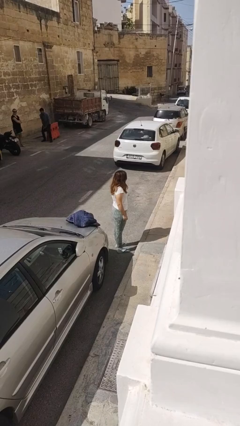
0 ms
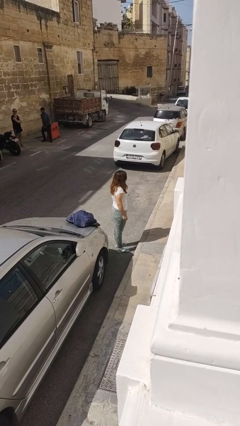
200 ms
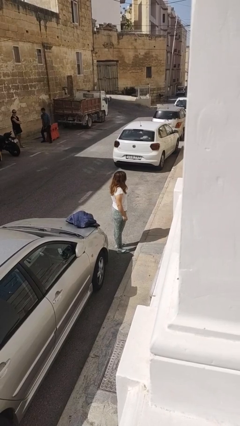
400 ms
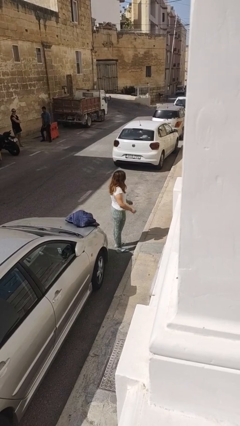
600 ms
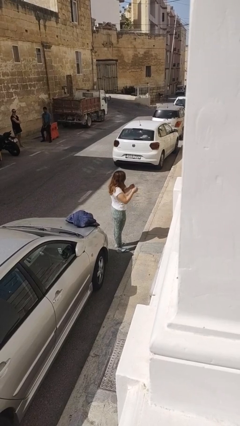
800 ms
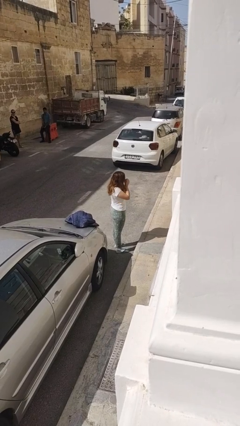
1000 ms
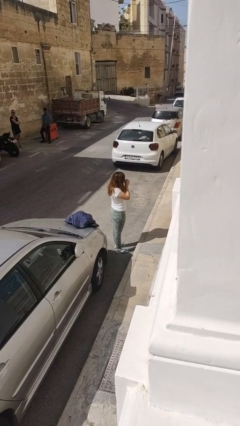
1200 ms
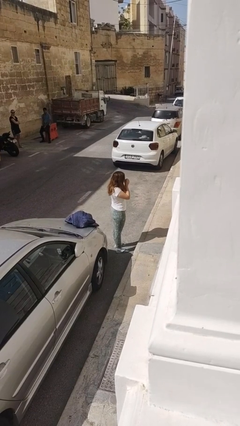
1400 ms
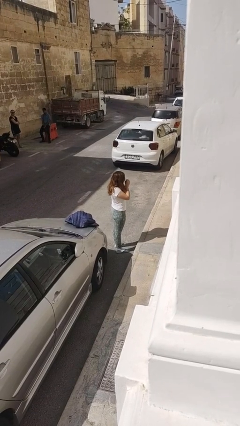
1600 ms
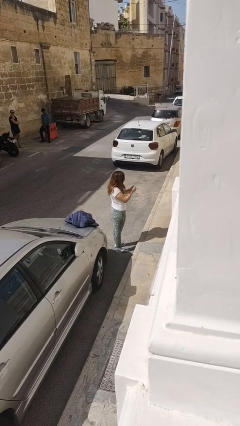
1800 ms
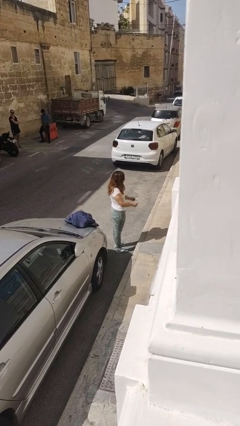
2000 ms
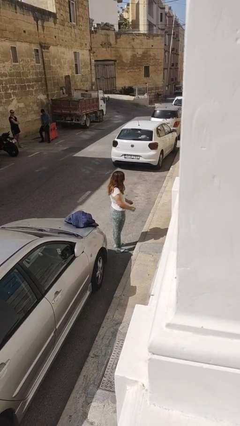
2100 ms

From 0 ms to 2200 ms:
person blows into hands

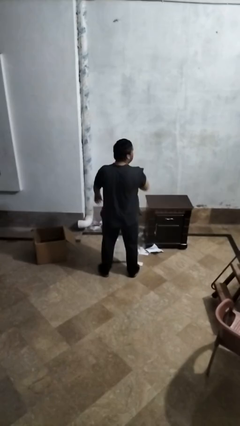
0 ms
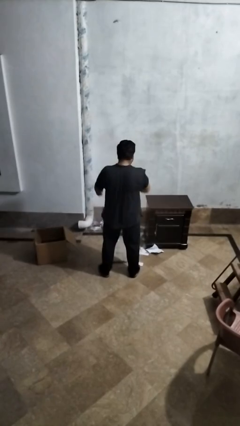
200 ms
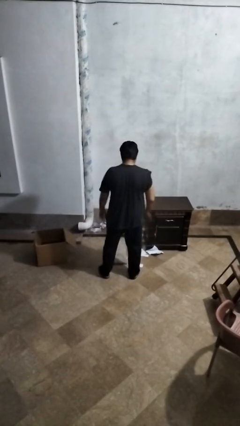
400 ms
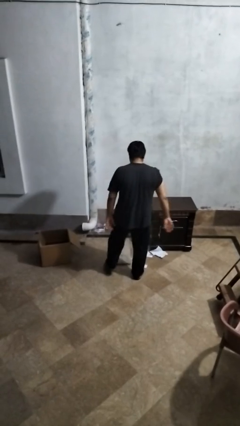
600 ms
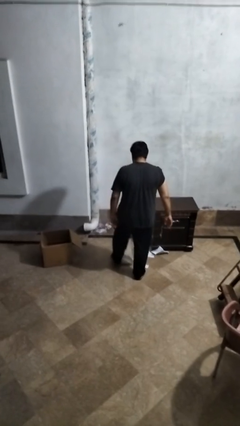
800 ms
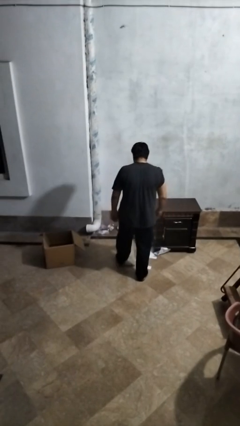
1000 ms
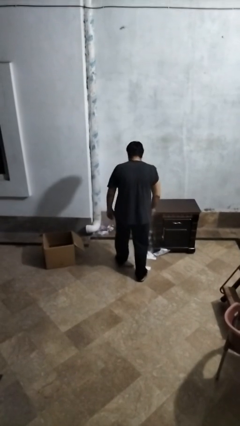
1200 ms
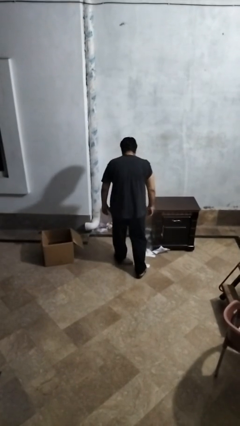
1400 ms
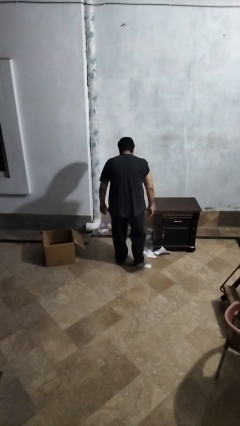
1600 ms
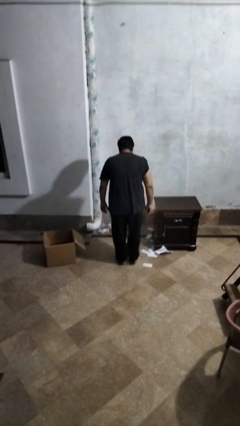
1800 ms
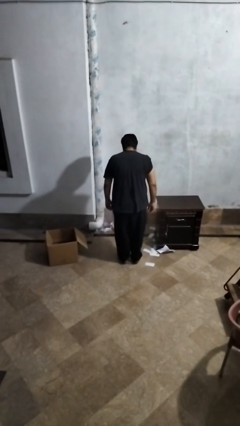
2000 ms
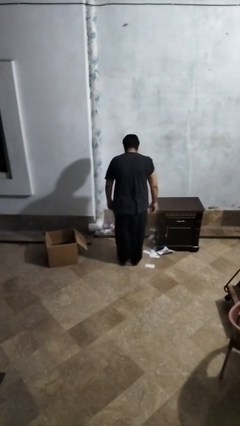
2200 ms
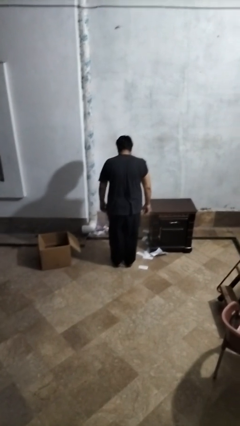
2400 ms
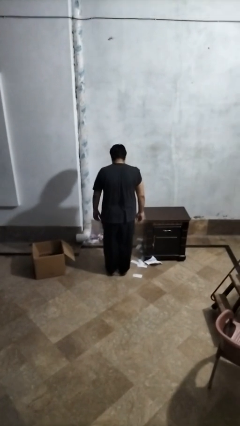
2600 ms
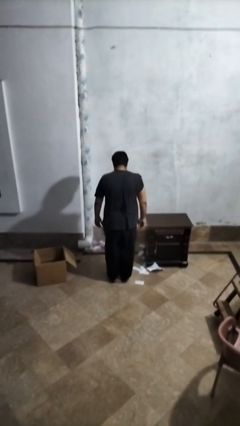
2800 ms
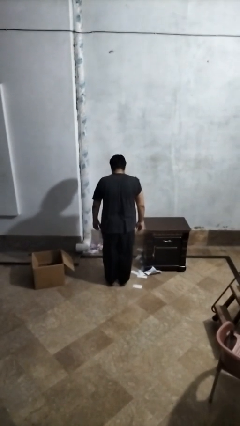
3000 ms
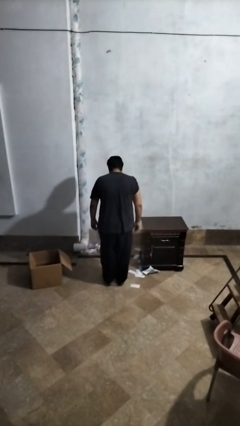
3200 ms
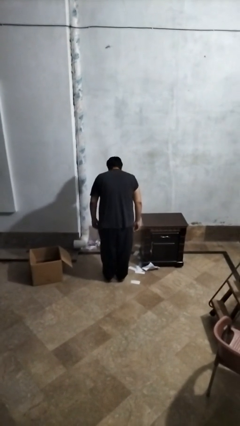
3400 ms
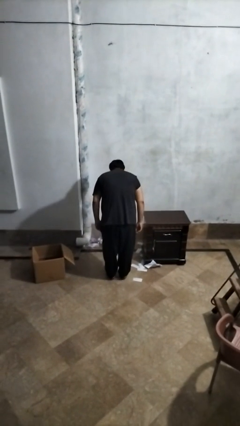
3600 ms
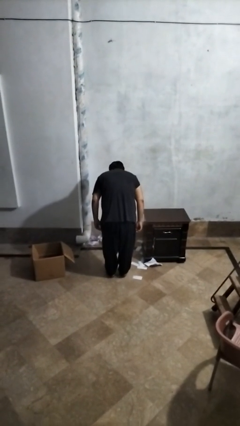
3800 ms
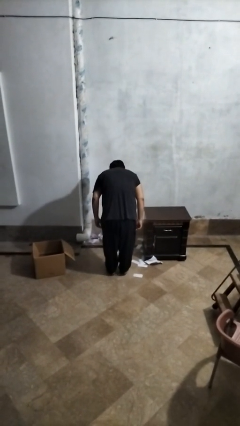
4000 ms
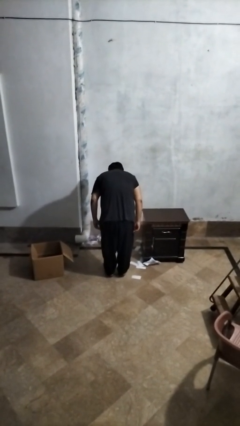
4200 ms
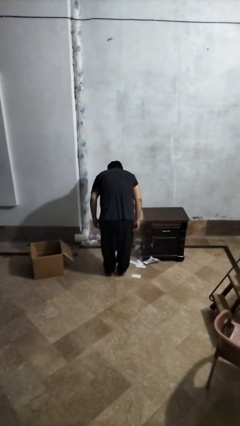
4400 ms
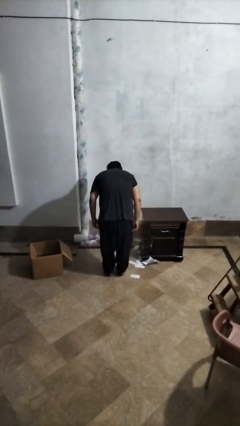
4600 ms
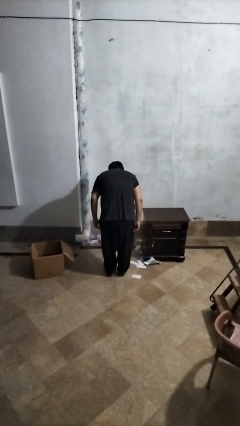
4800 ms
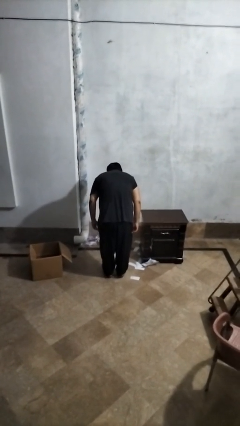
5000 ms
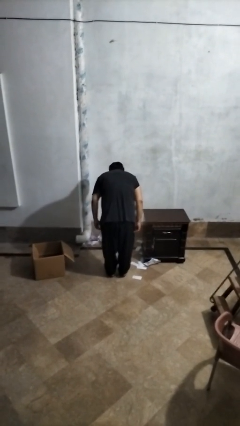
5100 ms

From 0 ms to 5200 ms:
person uses bodyweight scale

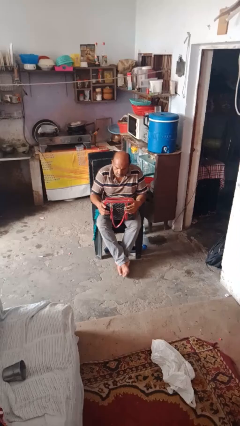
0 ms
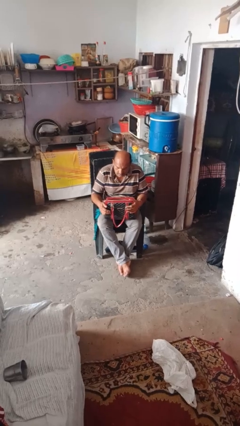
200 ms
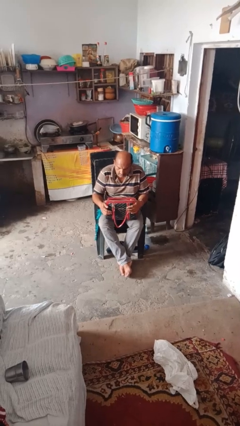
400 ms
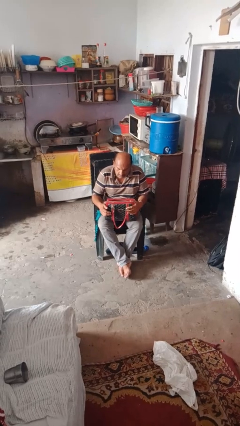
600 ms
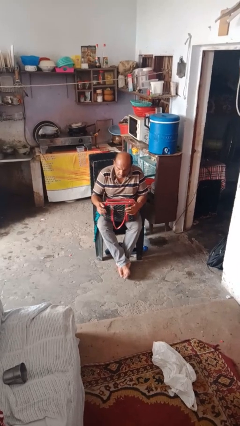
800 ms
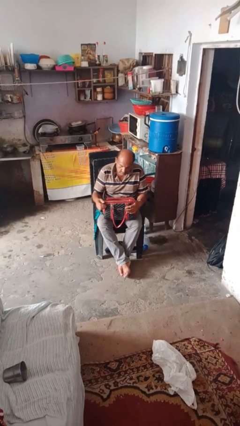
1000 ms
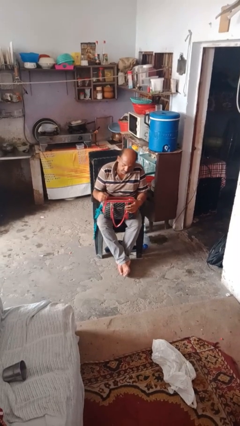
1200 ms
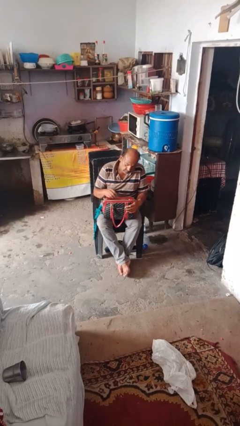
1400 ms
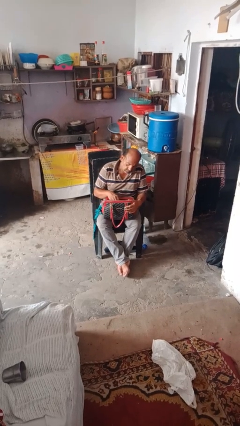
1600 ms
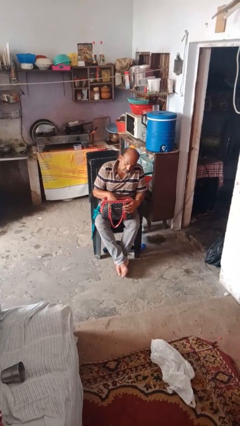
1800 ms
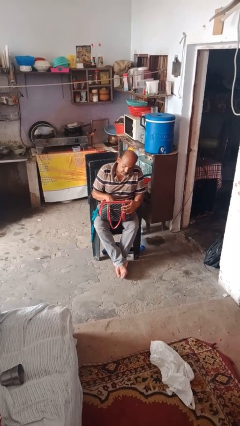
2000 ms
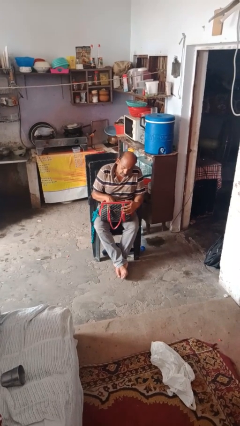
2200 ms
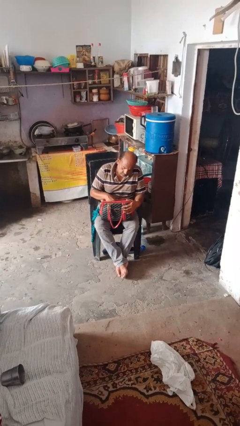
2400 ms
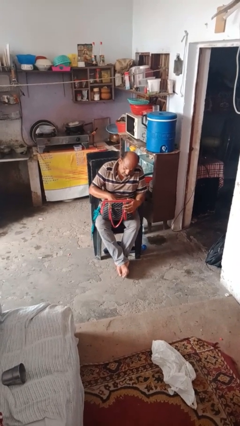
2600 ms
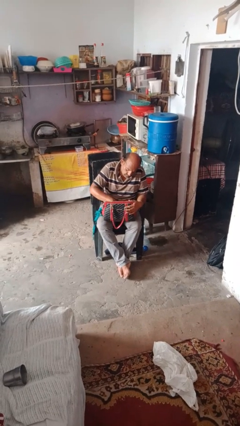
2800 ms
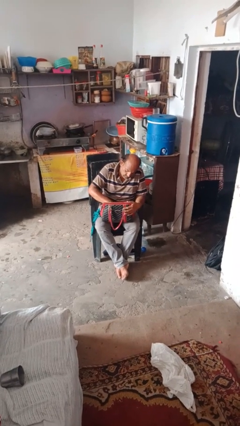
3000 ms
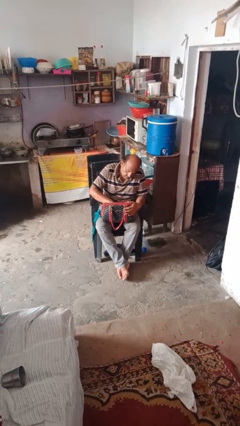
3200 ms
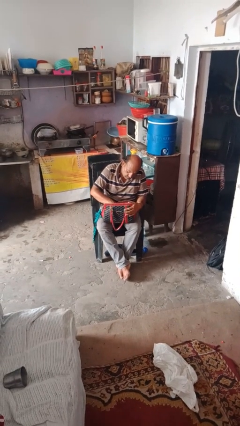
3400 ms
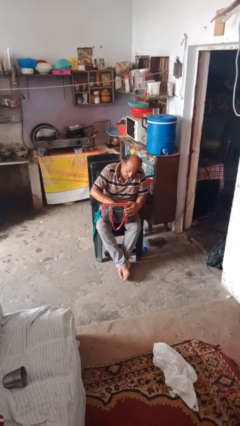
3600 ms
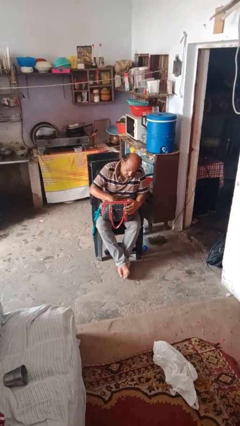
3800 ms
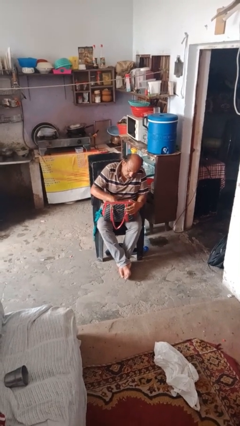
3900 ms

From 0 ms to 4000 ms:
person searches in purse

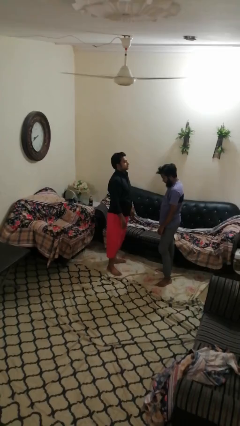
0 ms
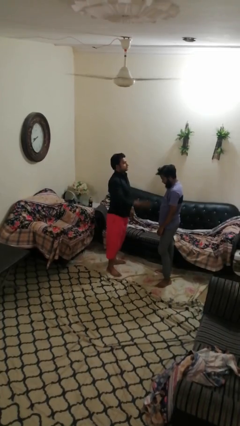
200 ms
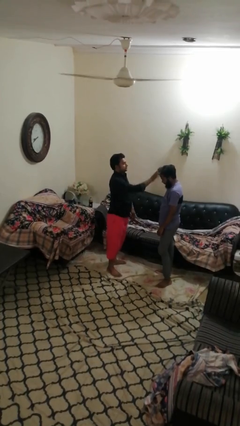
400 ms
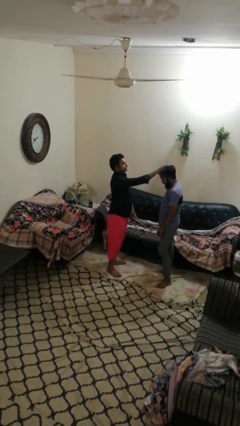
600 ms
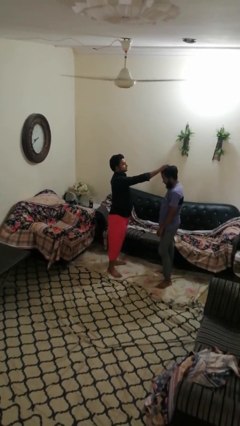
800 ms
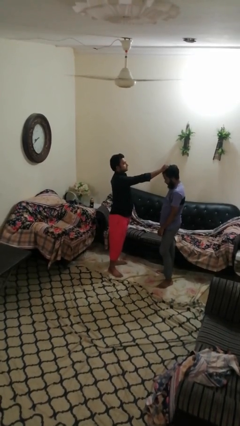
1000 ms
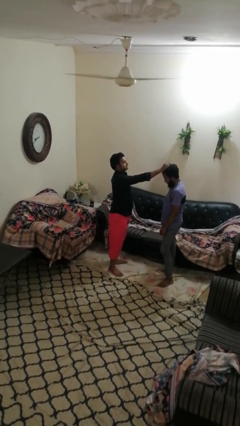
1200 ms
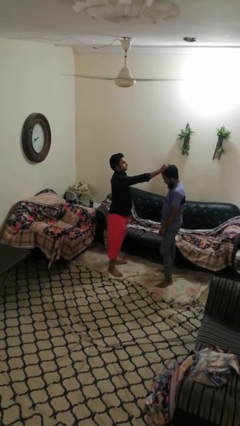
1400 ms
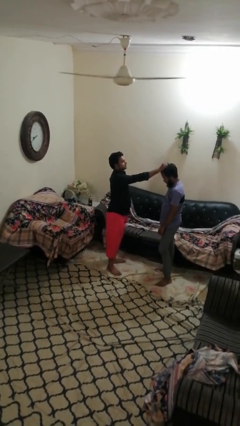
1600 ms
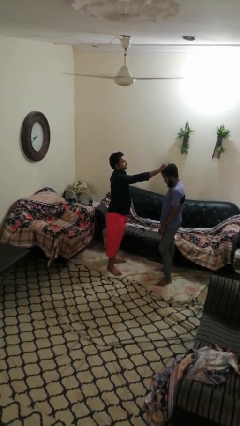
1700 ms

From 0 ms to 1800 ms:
person grabs person by hair

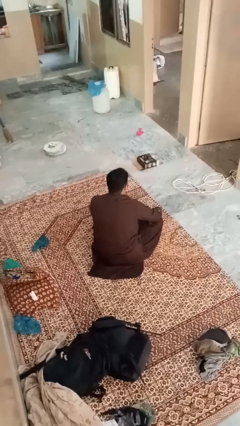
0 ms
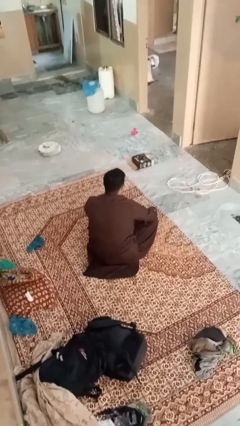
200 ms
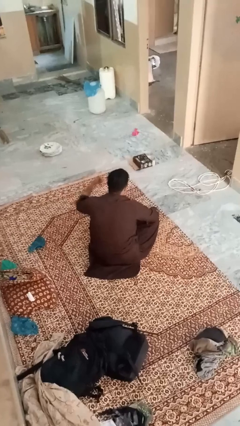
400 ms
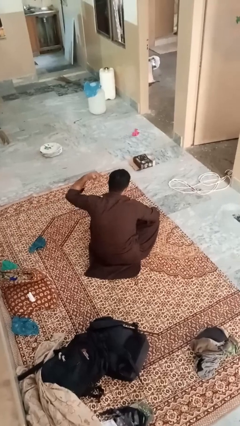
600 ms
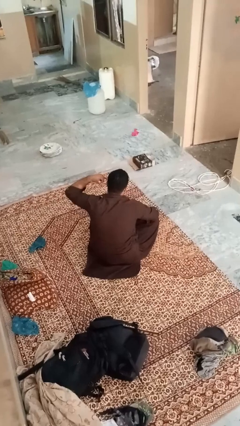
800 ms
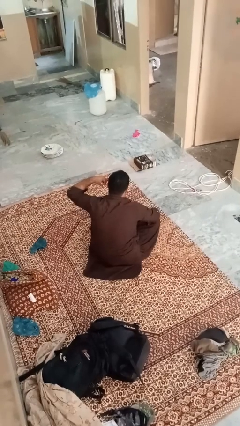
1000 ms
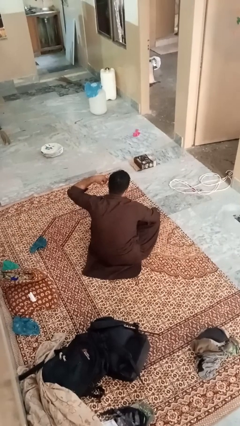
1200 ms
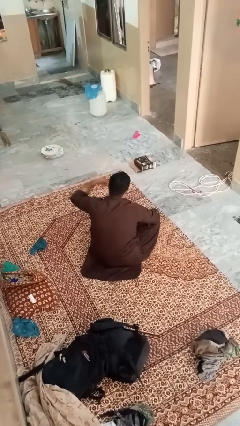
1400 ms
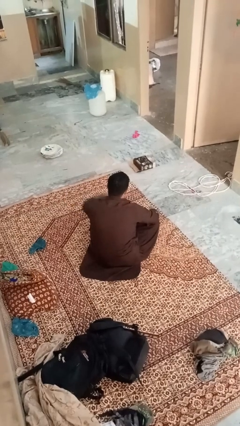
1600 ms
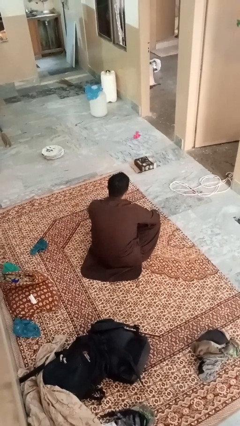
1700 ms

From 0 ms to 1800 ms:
person gestures call me

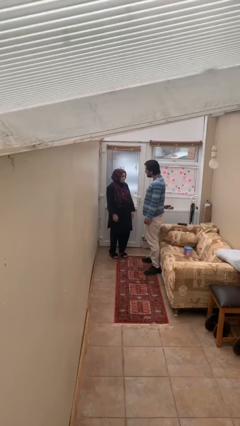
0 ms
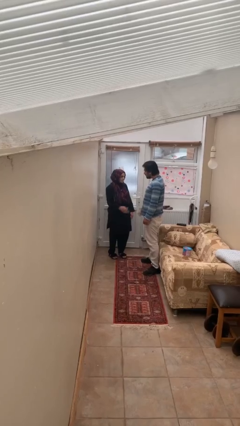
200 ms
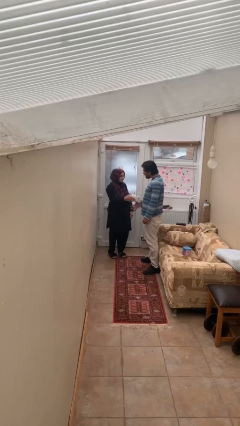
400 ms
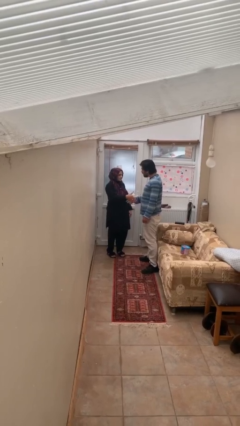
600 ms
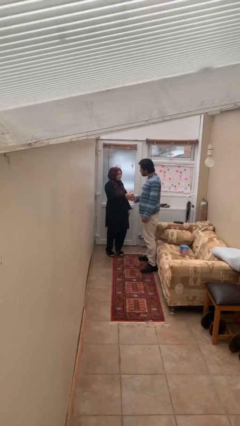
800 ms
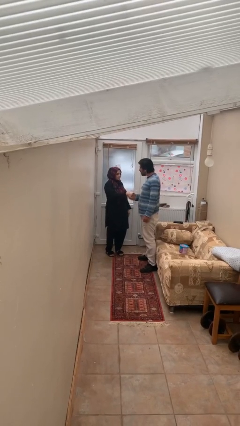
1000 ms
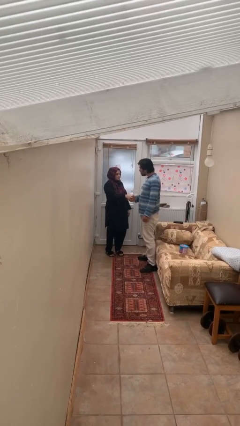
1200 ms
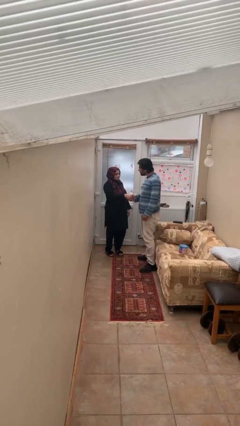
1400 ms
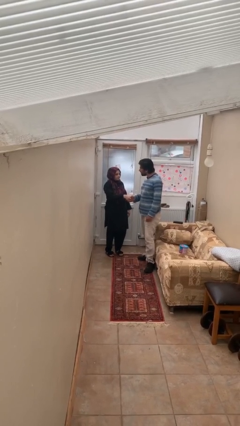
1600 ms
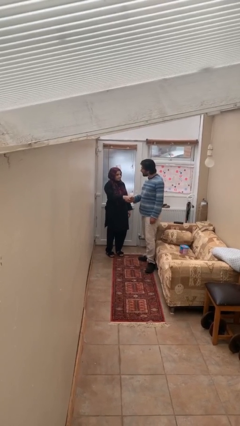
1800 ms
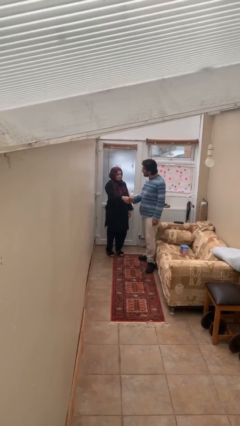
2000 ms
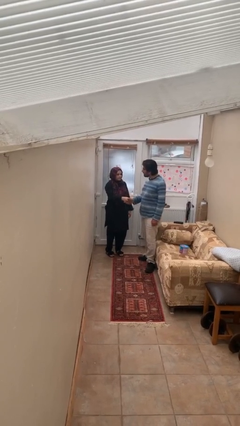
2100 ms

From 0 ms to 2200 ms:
person shakes hand

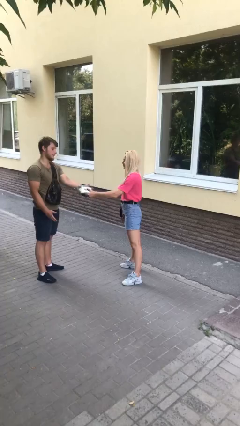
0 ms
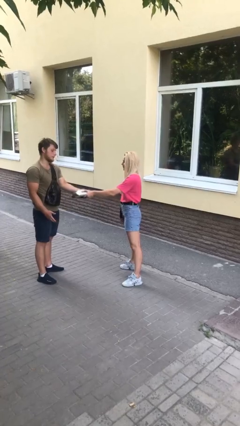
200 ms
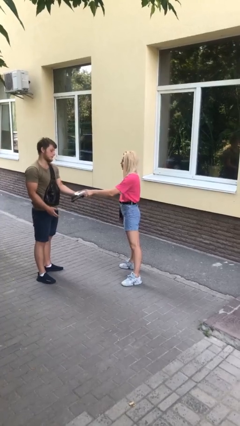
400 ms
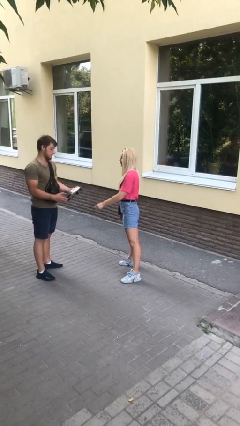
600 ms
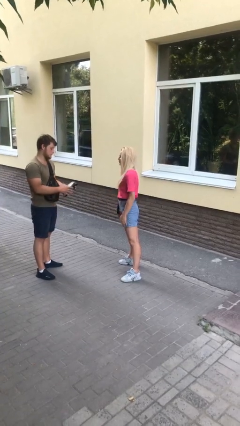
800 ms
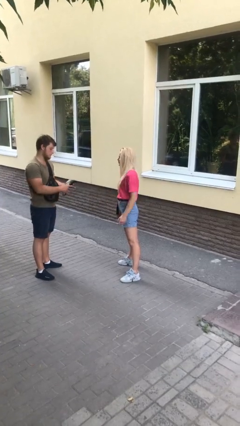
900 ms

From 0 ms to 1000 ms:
person transfers object to person
